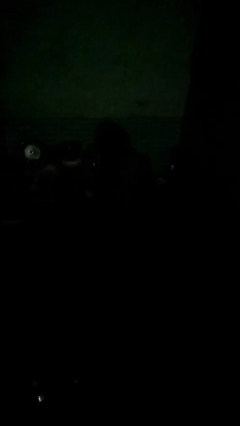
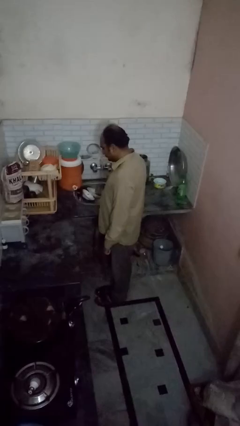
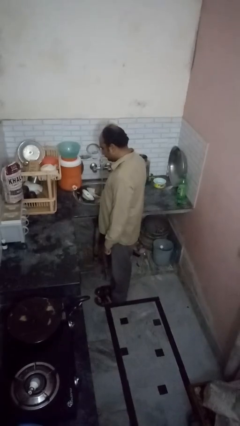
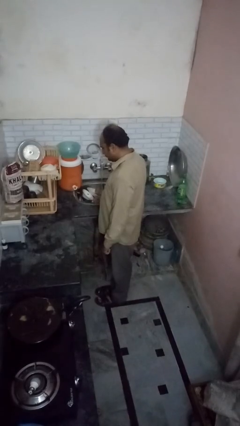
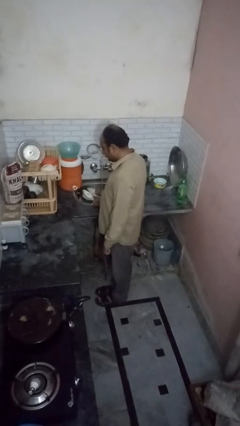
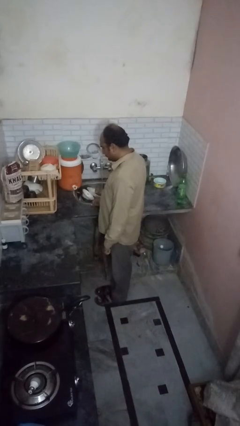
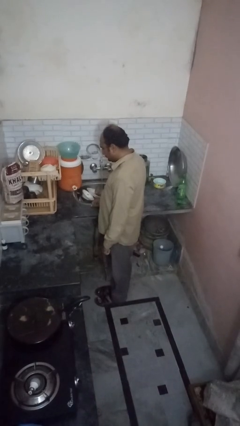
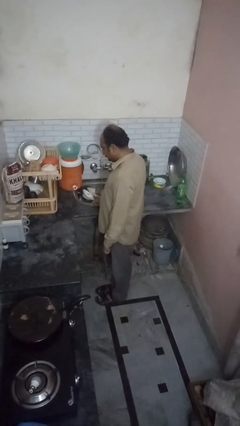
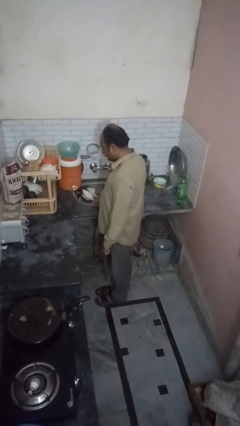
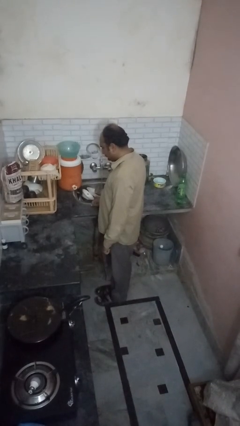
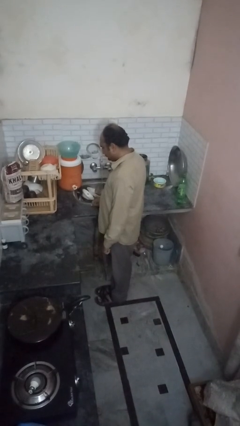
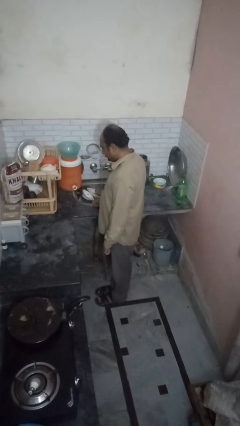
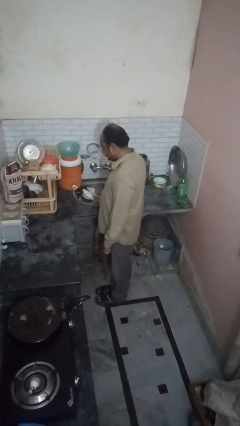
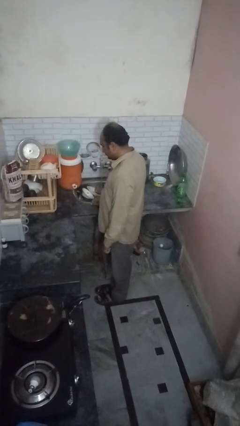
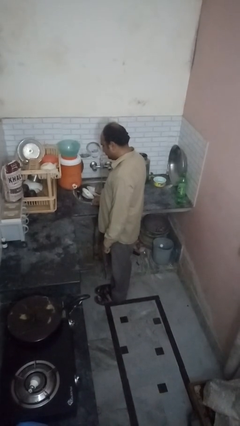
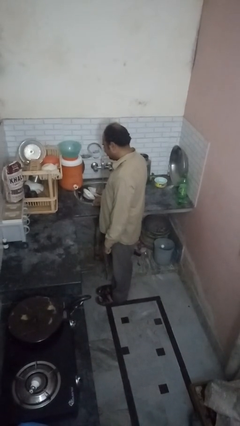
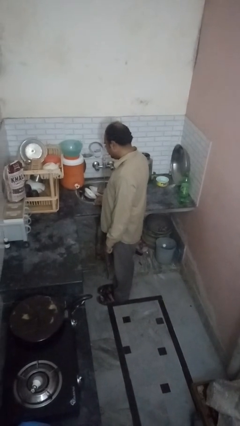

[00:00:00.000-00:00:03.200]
person opens dishwasher

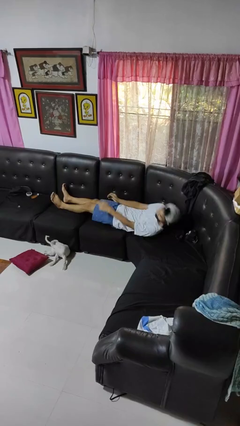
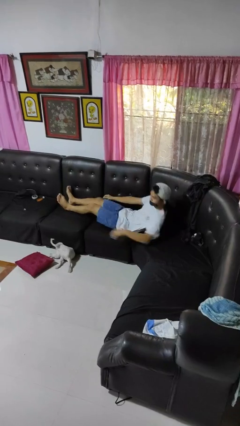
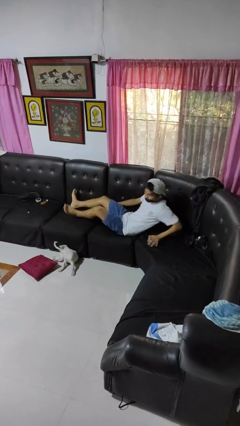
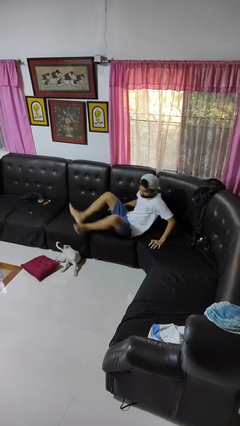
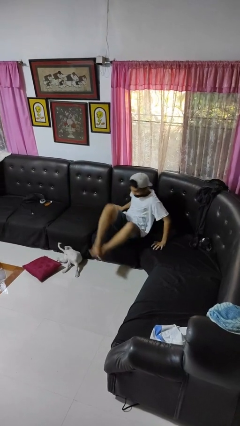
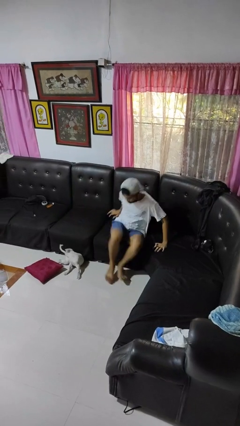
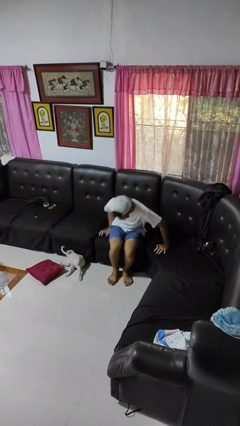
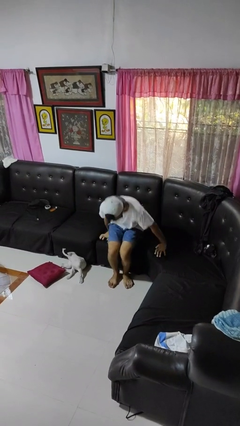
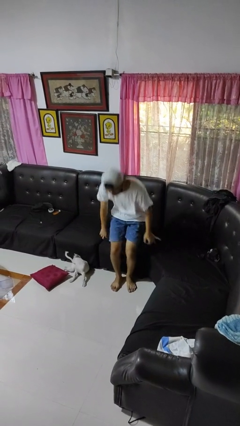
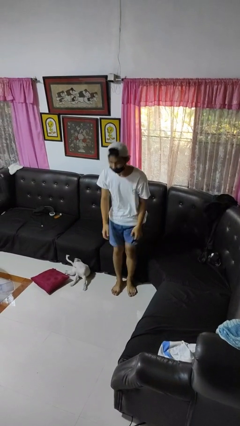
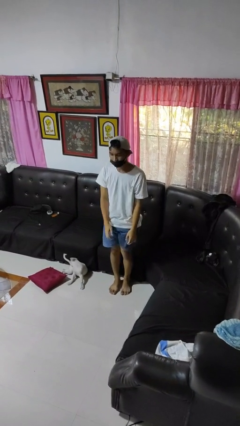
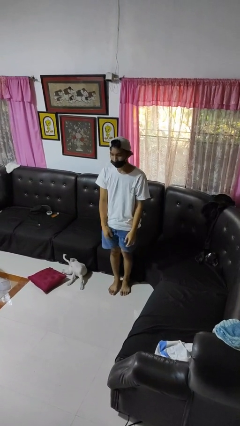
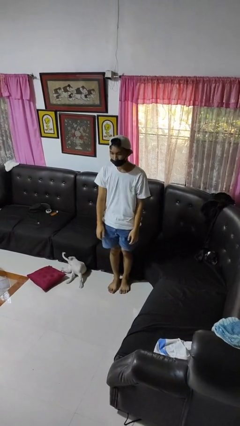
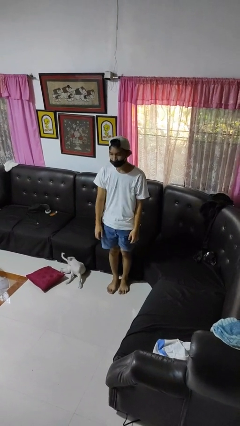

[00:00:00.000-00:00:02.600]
person stands up

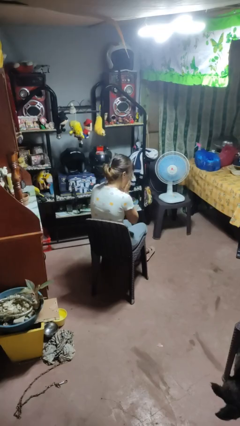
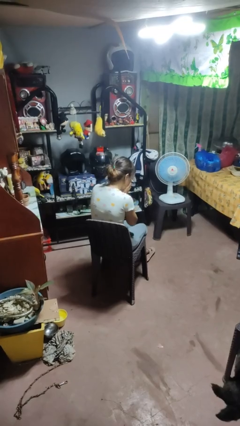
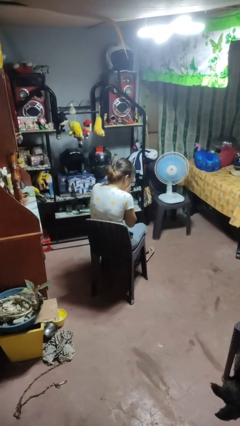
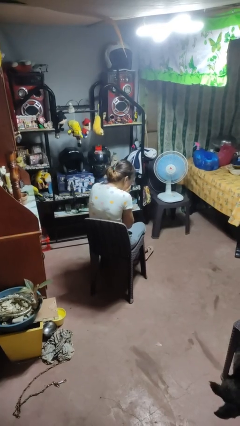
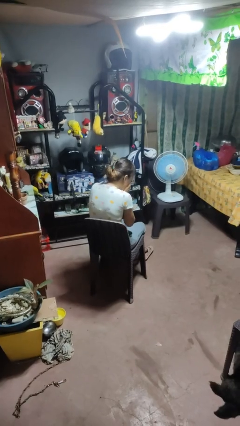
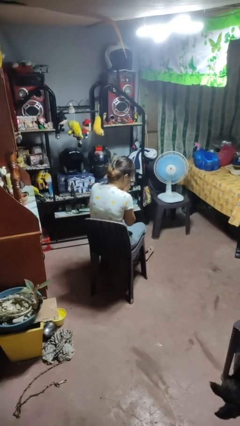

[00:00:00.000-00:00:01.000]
person sneezes into hand

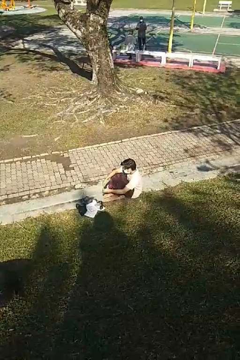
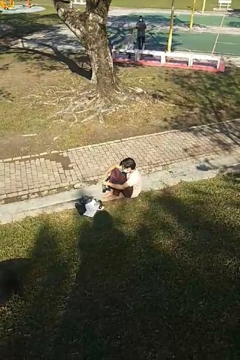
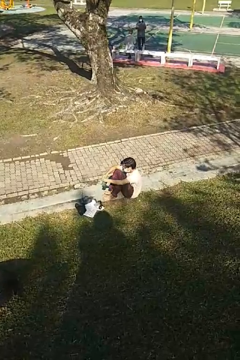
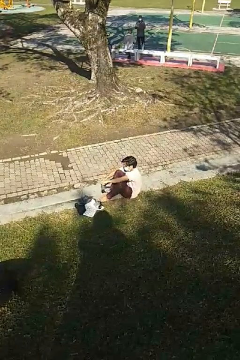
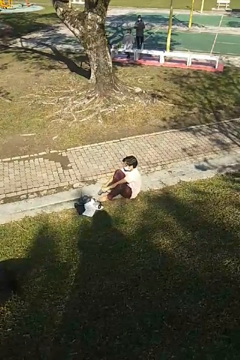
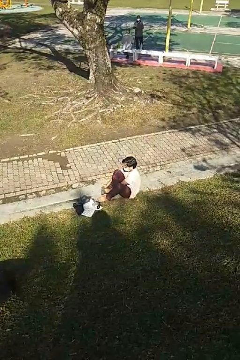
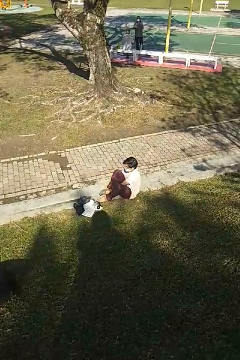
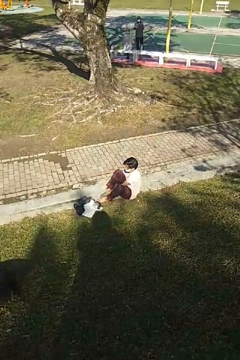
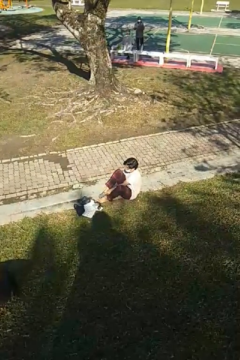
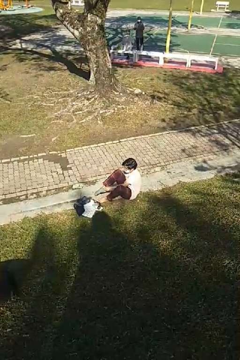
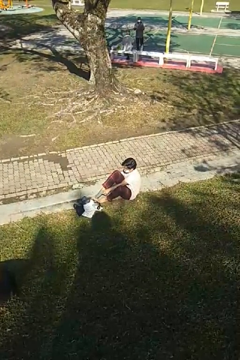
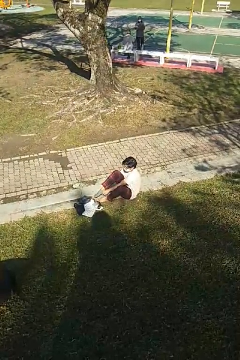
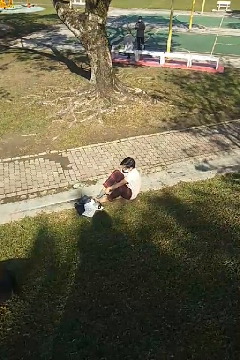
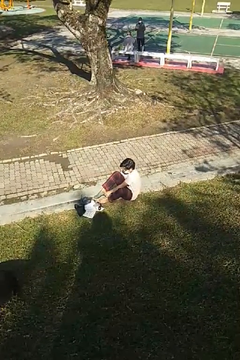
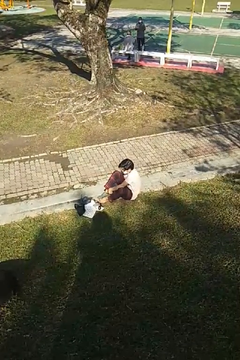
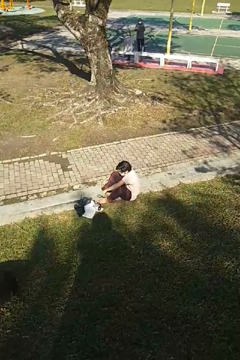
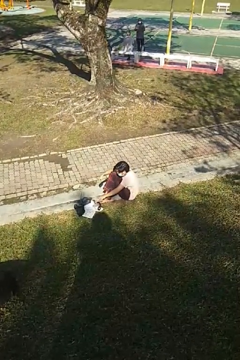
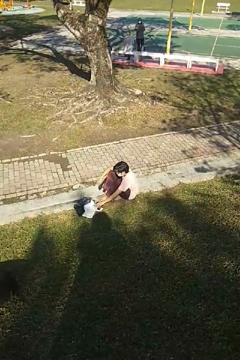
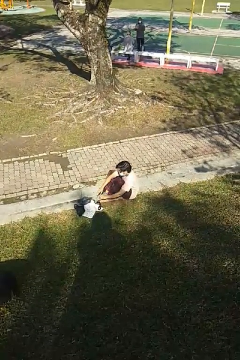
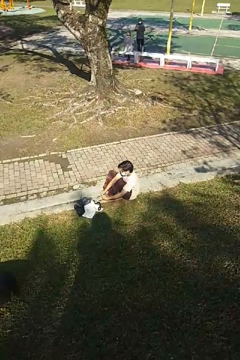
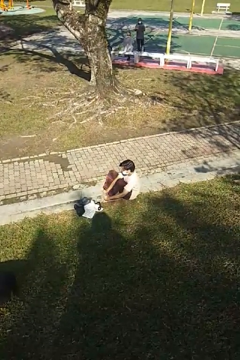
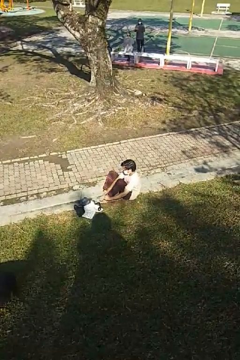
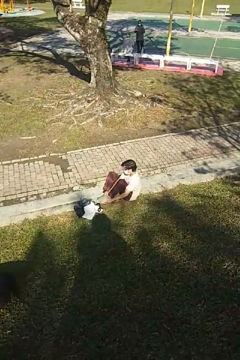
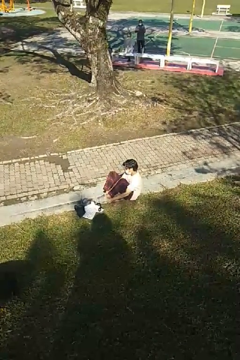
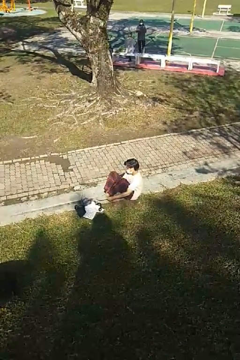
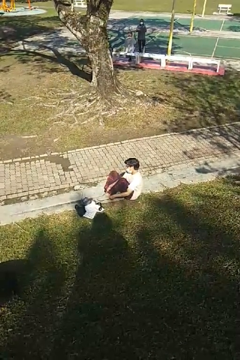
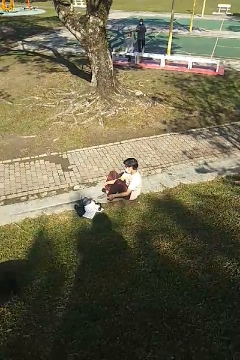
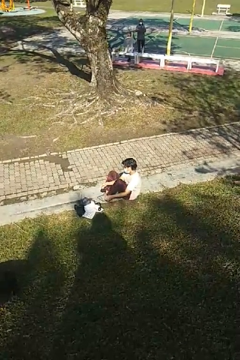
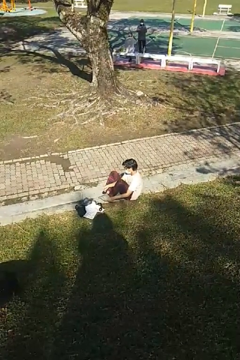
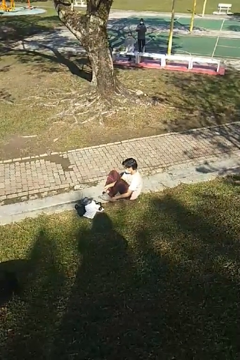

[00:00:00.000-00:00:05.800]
person puts on socks

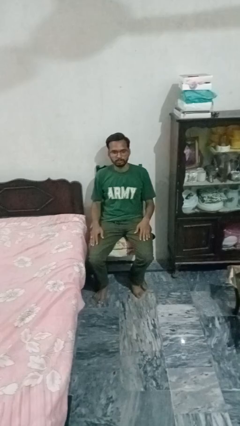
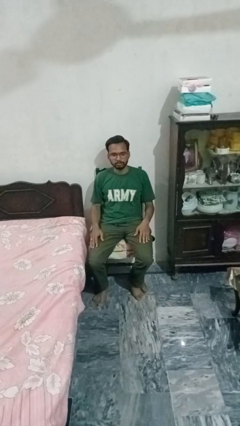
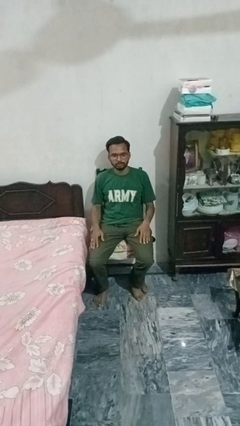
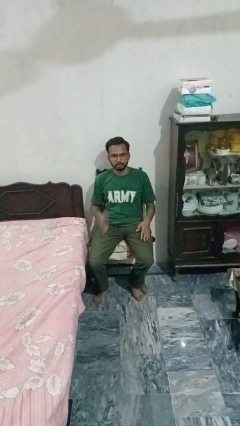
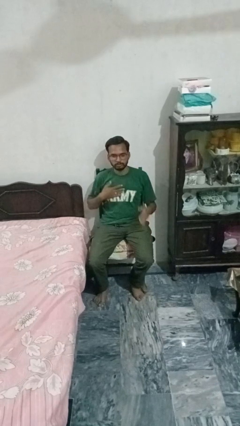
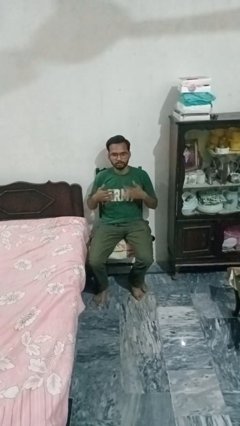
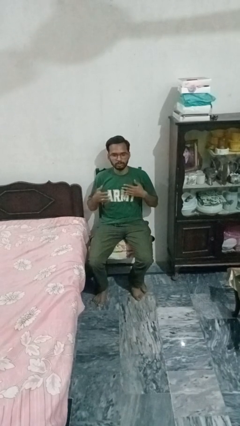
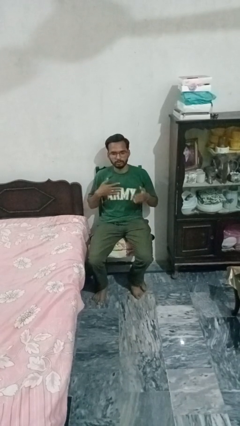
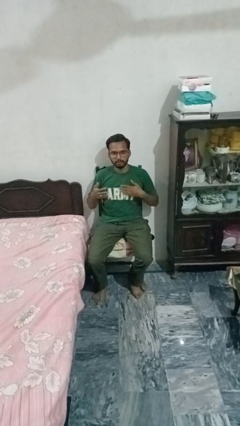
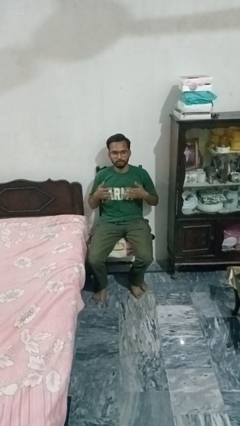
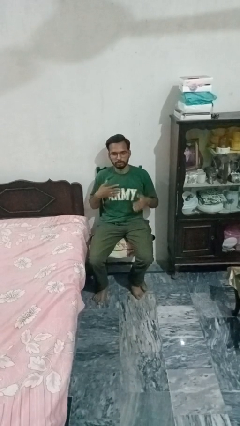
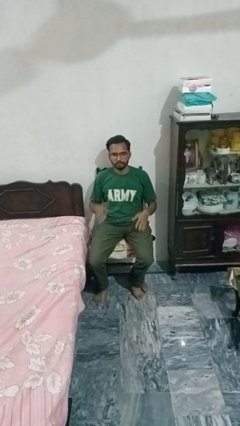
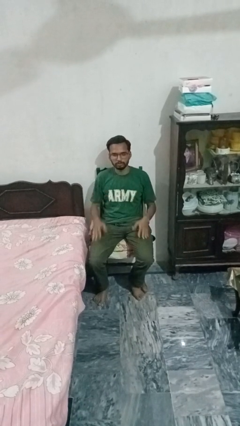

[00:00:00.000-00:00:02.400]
person drums on chest

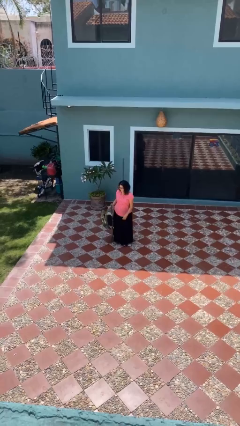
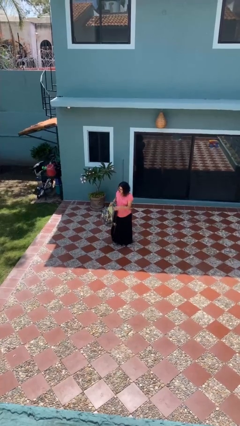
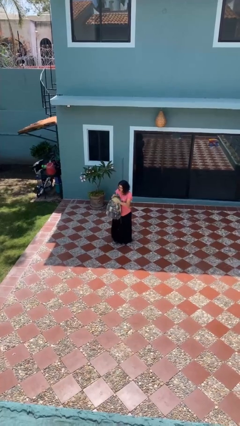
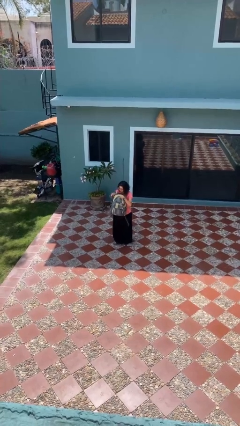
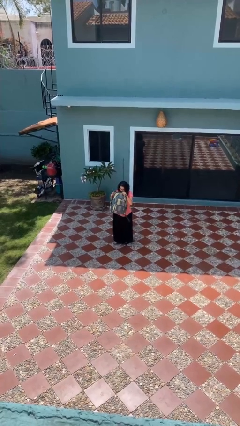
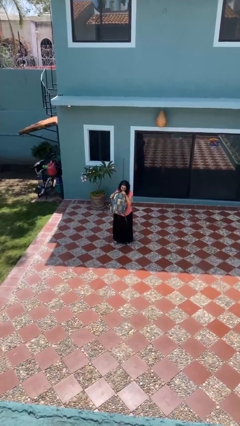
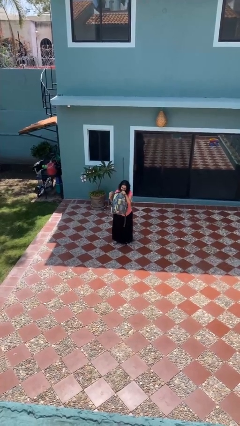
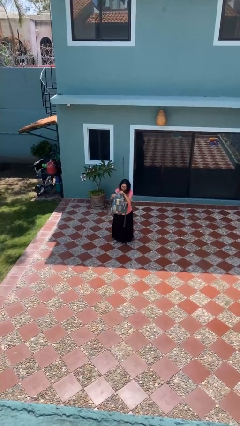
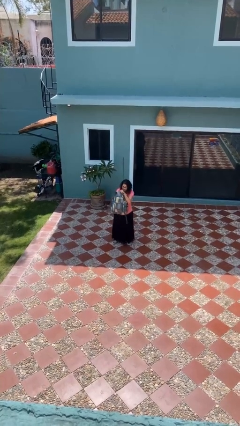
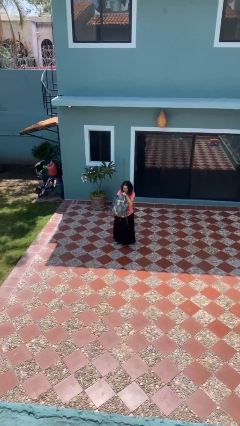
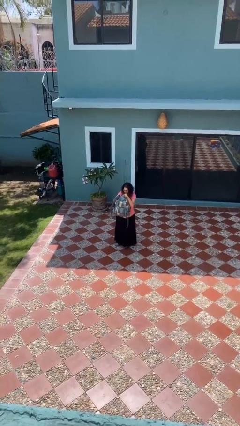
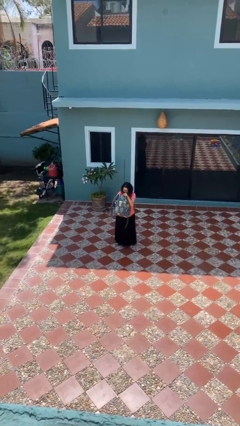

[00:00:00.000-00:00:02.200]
person searches in backpack

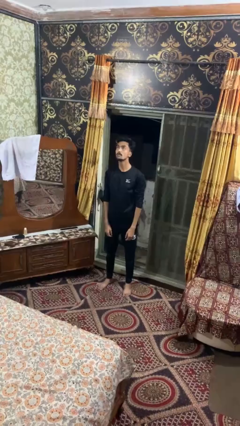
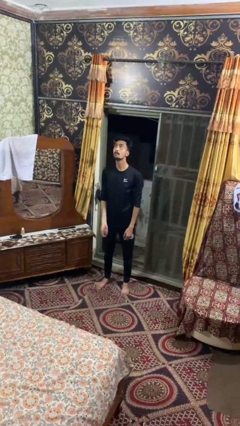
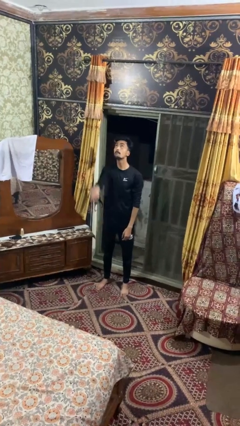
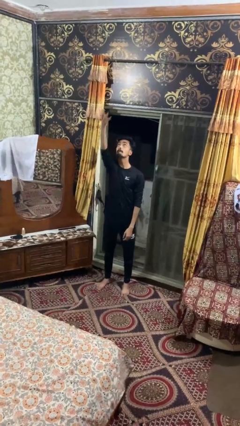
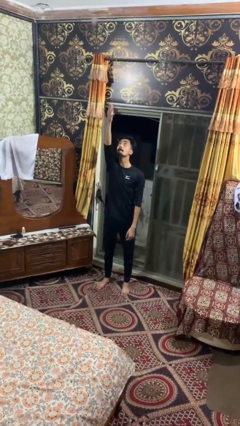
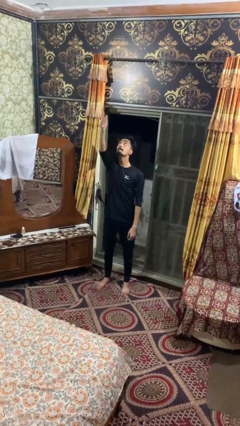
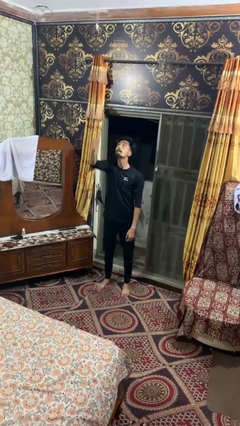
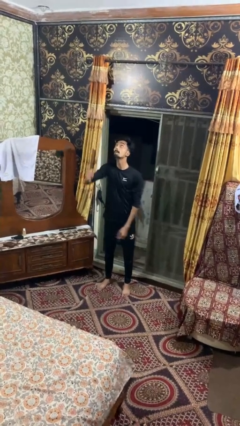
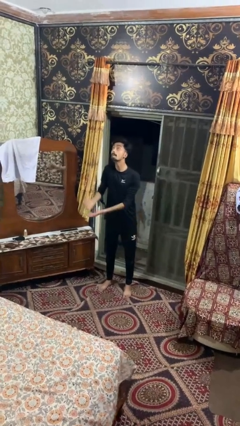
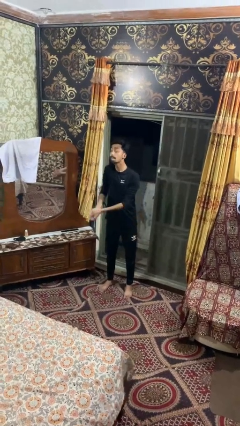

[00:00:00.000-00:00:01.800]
person drops object
